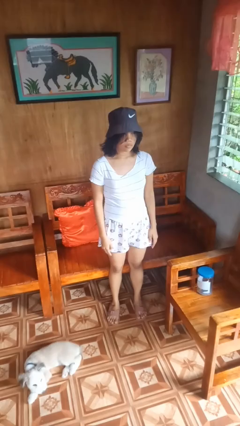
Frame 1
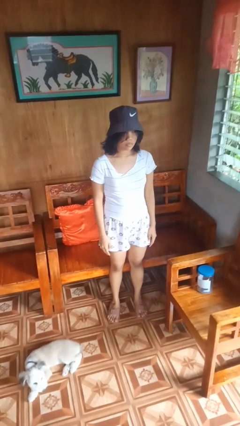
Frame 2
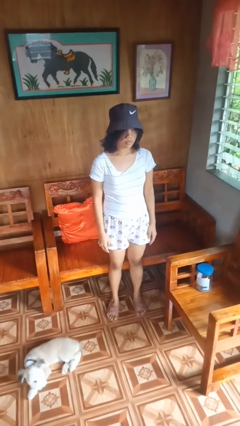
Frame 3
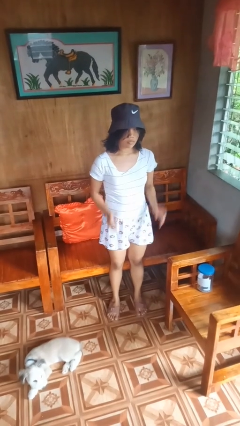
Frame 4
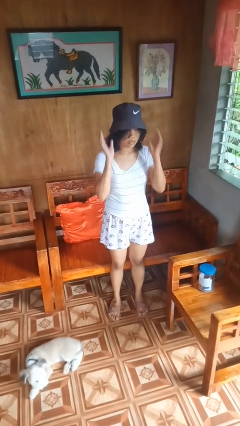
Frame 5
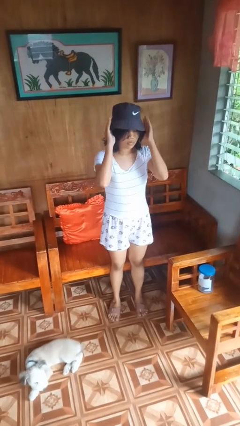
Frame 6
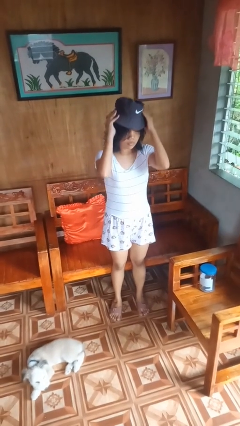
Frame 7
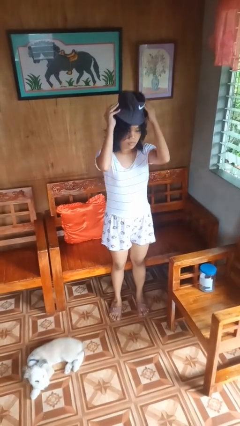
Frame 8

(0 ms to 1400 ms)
person takes off hat

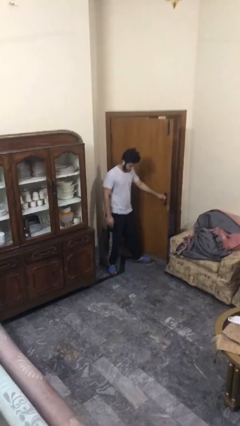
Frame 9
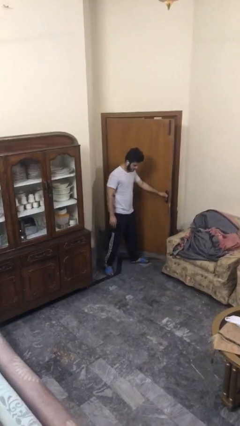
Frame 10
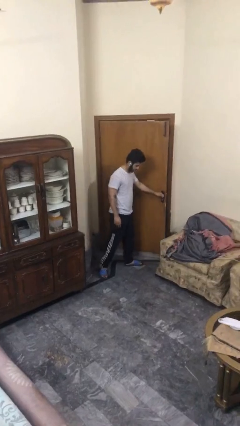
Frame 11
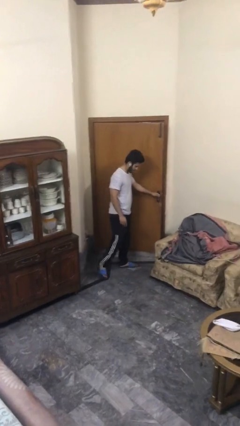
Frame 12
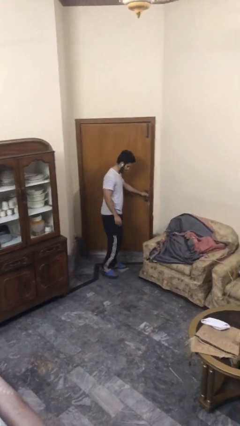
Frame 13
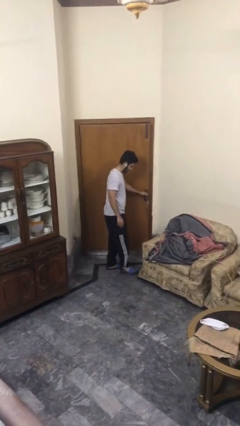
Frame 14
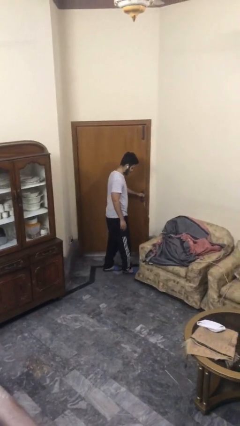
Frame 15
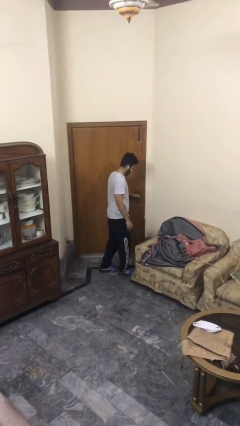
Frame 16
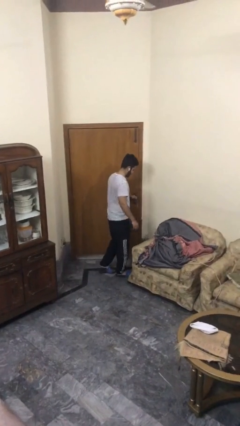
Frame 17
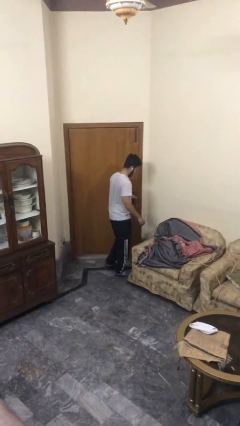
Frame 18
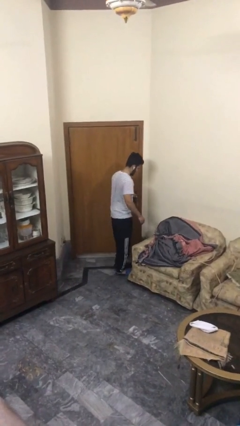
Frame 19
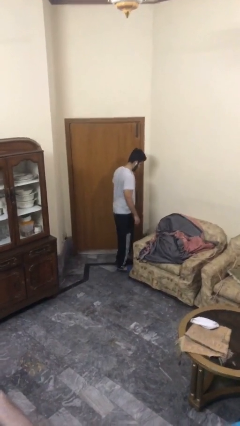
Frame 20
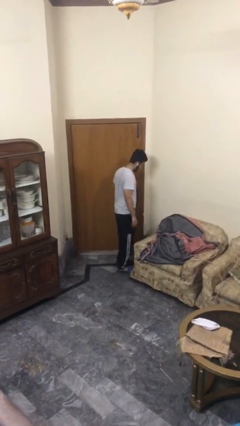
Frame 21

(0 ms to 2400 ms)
person closes facility door

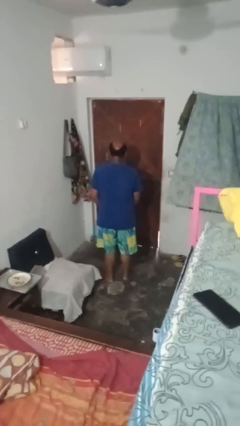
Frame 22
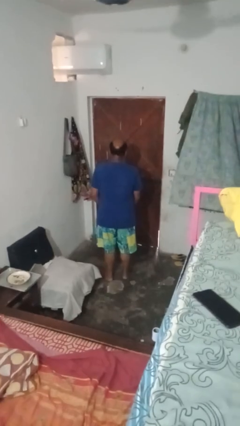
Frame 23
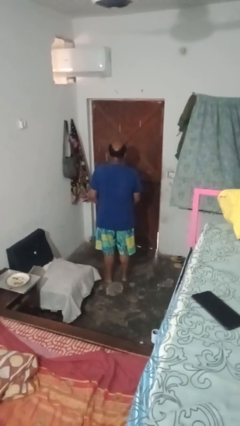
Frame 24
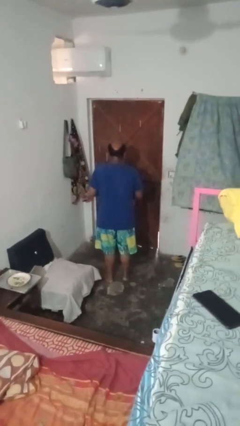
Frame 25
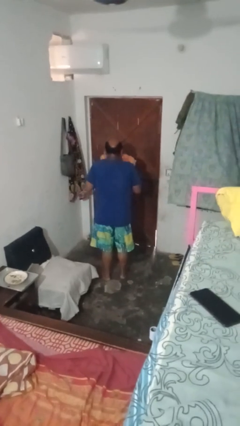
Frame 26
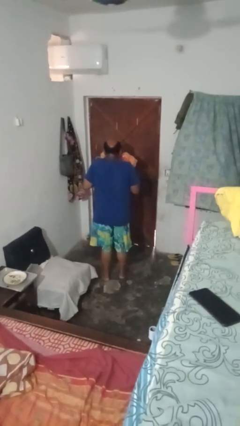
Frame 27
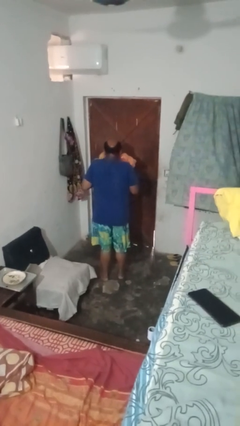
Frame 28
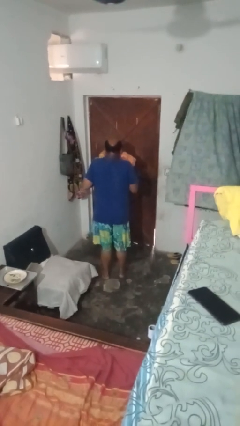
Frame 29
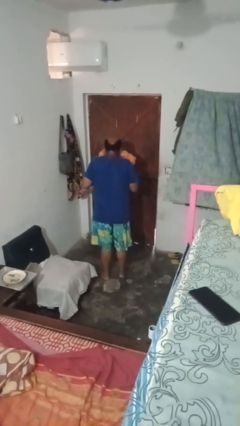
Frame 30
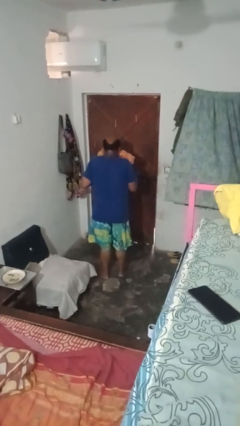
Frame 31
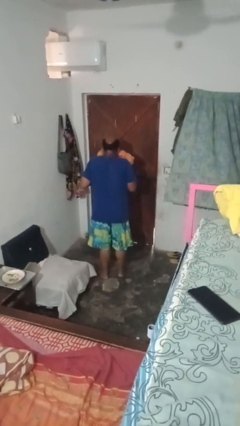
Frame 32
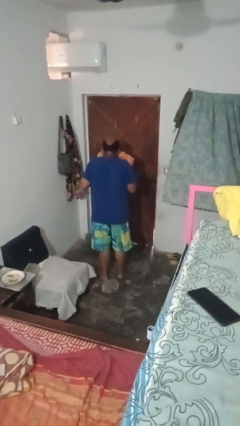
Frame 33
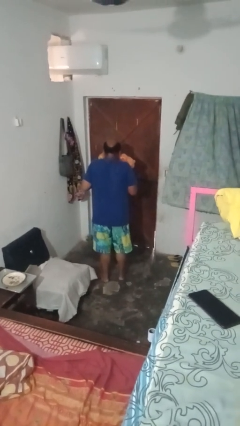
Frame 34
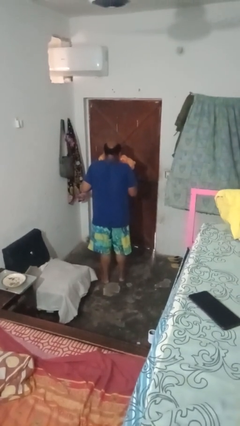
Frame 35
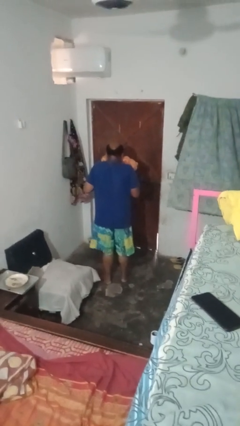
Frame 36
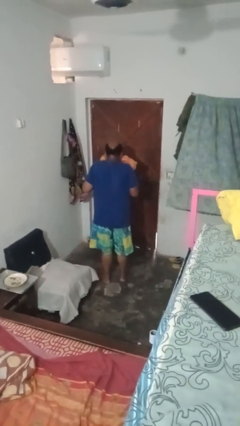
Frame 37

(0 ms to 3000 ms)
person hugs stuffed animal

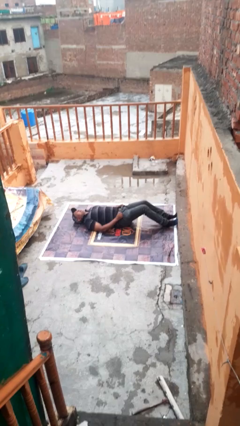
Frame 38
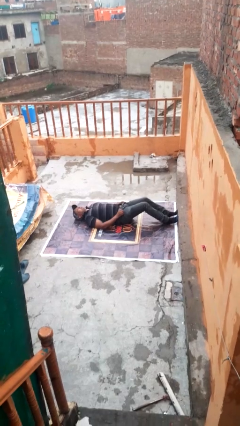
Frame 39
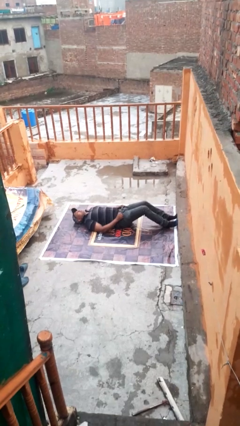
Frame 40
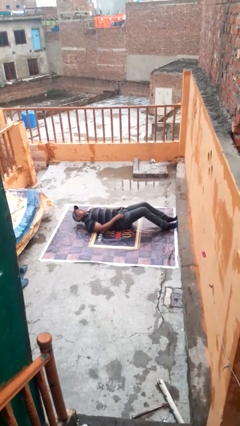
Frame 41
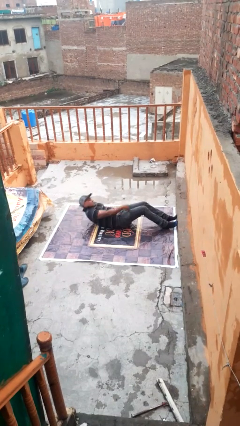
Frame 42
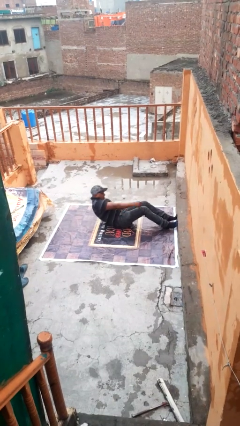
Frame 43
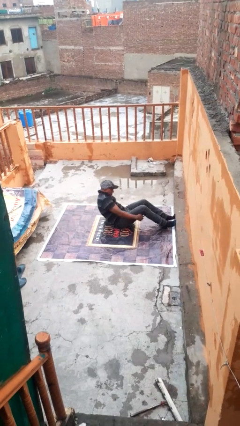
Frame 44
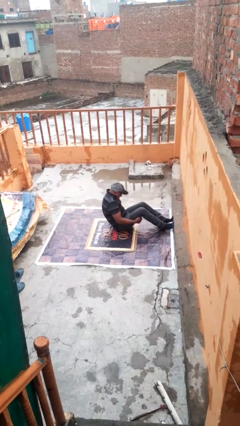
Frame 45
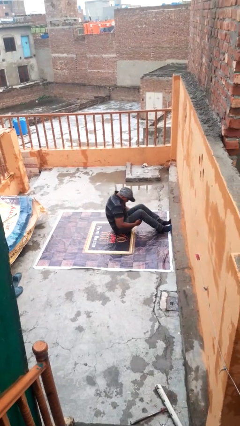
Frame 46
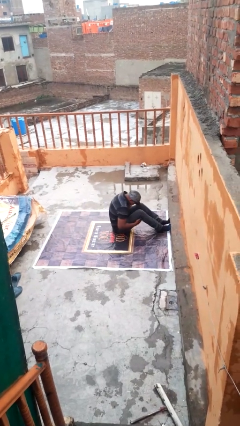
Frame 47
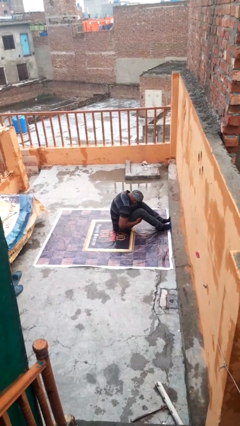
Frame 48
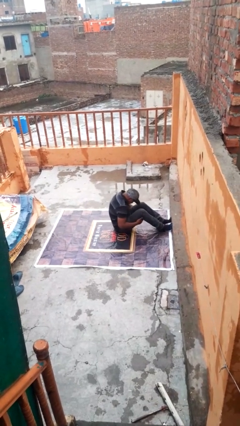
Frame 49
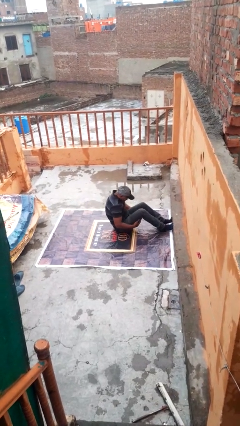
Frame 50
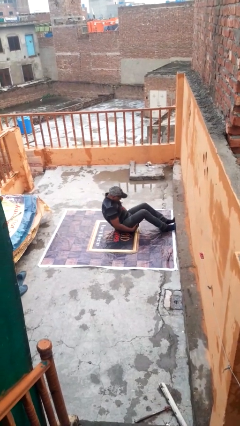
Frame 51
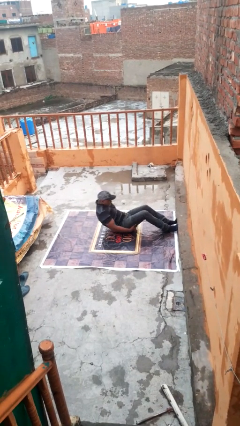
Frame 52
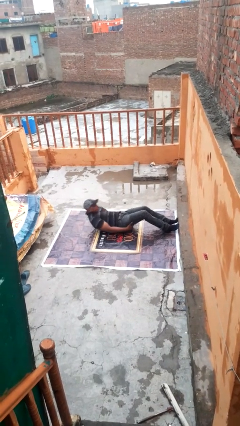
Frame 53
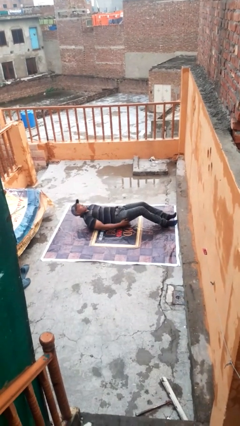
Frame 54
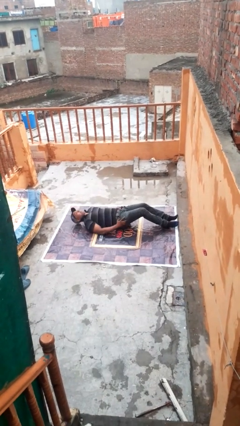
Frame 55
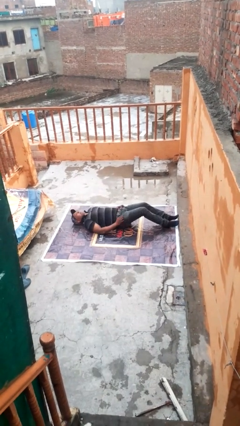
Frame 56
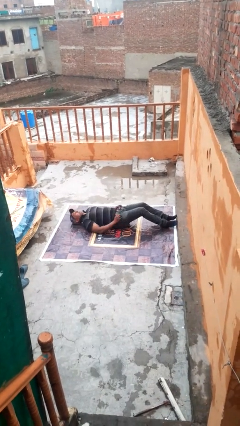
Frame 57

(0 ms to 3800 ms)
person exercises with situp

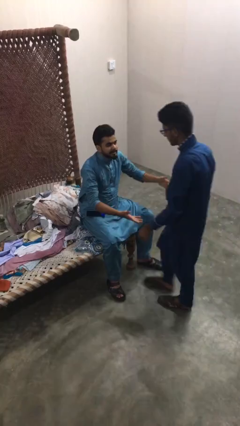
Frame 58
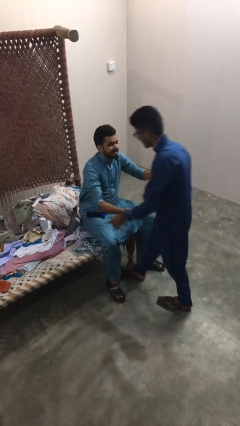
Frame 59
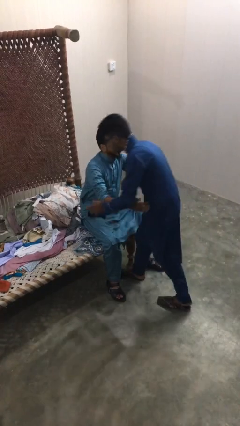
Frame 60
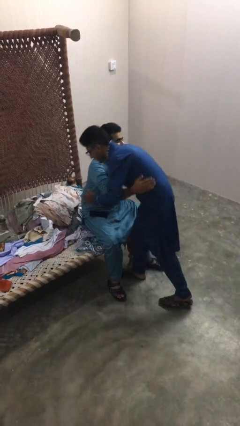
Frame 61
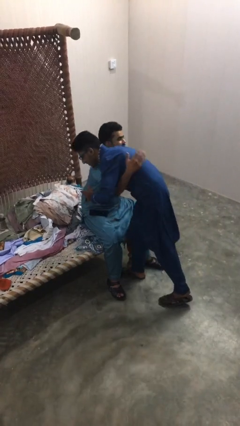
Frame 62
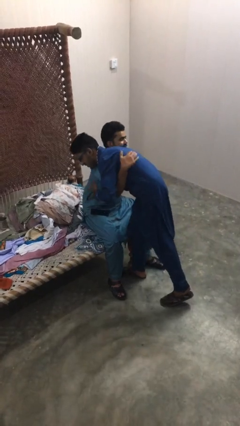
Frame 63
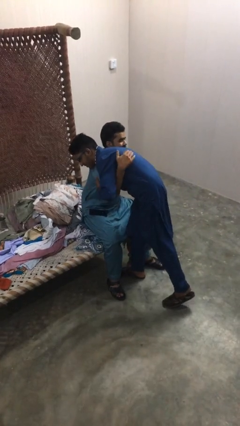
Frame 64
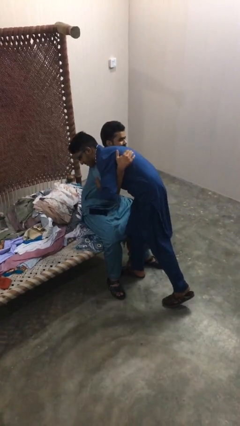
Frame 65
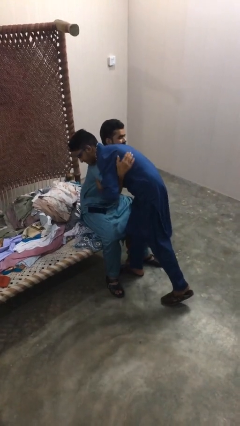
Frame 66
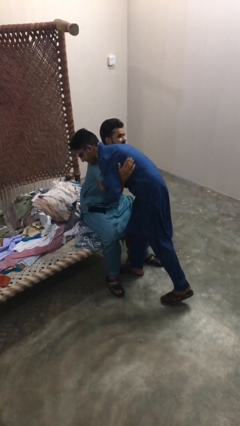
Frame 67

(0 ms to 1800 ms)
person embraces person

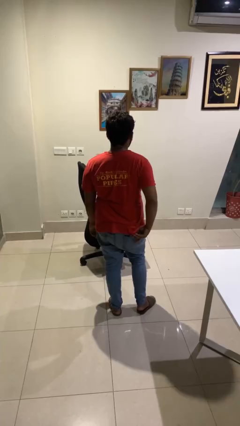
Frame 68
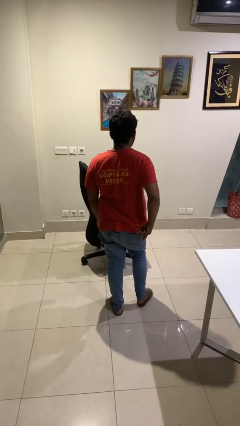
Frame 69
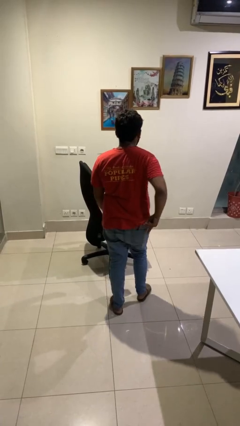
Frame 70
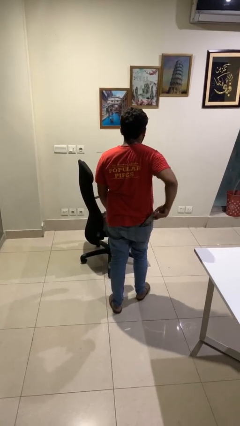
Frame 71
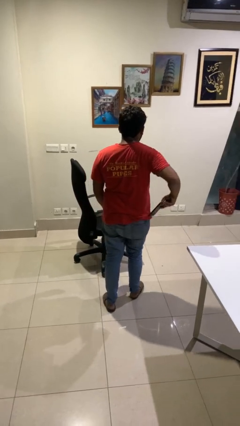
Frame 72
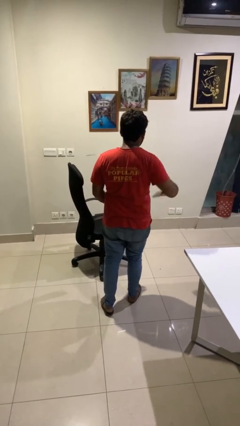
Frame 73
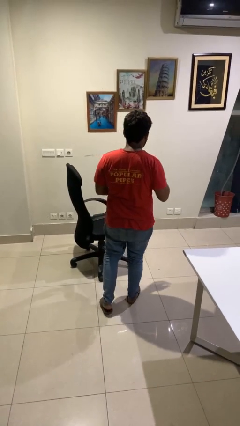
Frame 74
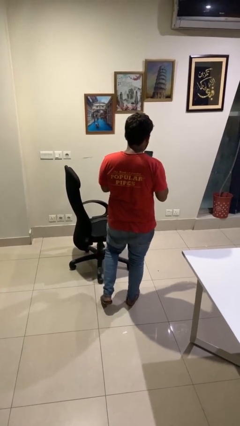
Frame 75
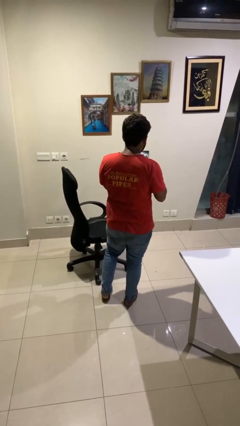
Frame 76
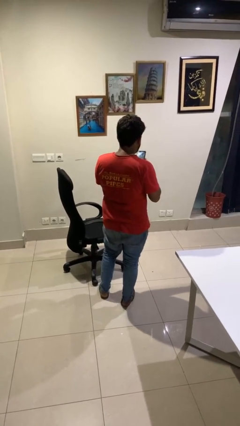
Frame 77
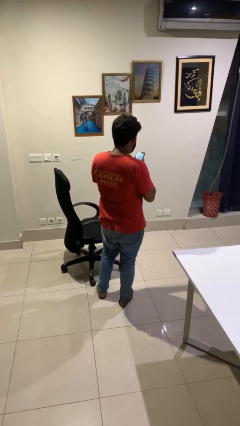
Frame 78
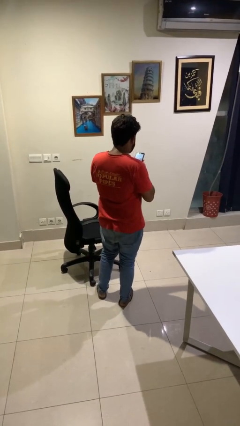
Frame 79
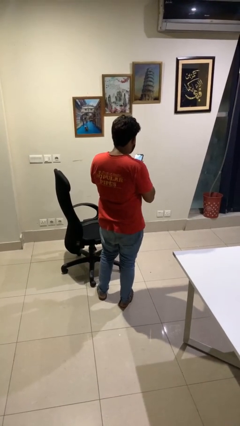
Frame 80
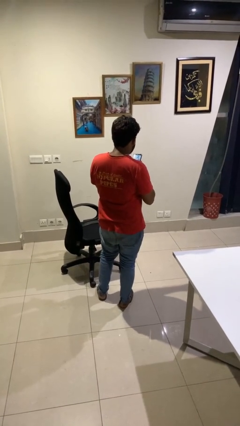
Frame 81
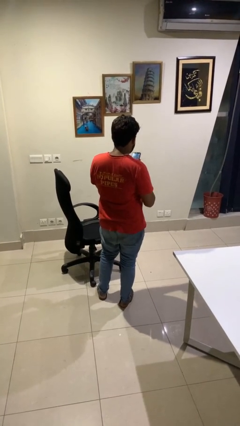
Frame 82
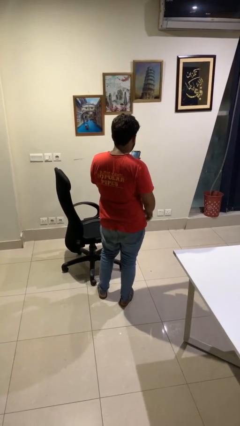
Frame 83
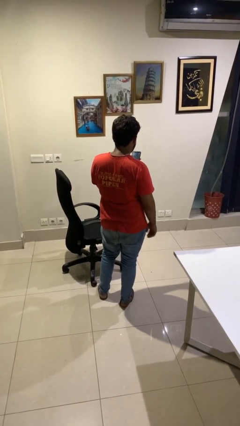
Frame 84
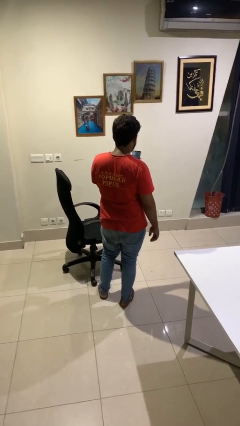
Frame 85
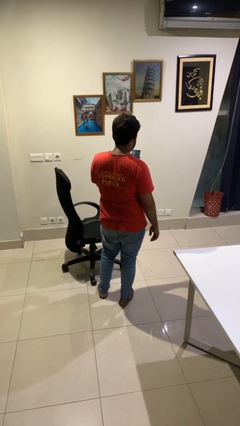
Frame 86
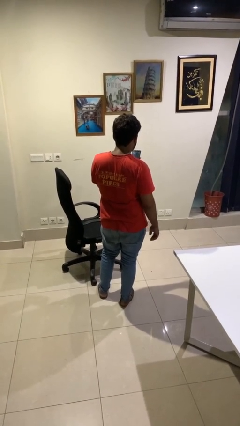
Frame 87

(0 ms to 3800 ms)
person takes phone from pocket

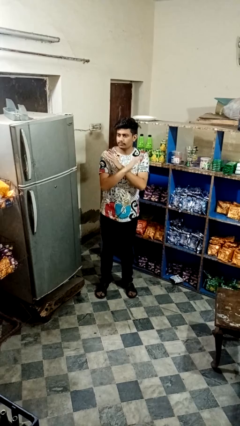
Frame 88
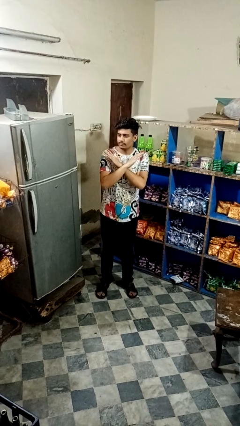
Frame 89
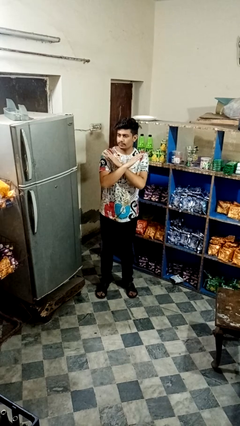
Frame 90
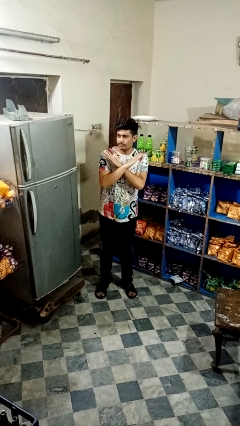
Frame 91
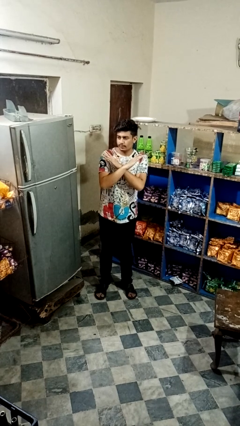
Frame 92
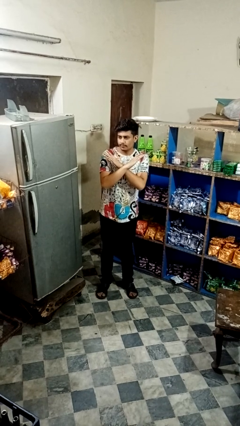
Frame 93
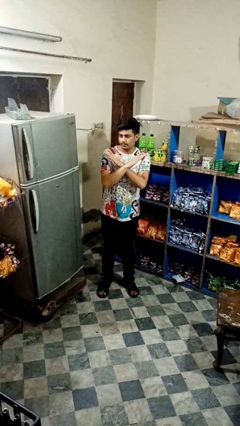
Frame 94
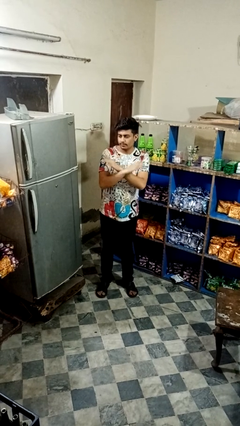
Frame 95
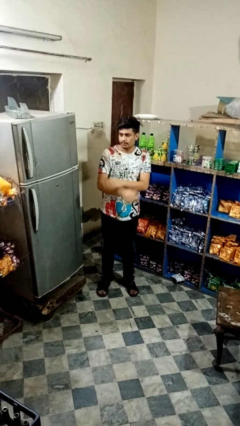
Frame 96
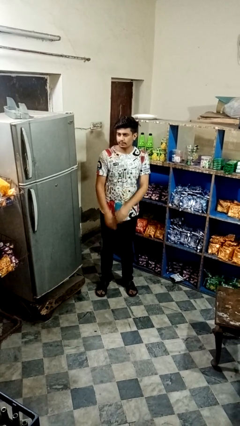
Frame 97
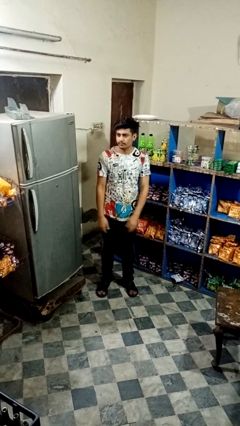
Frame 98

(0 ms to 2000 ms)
person gestures arms x
